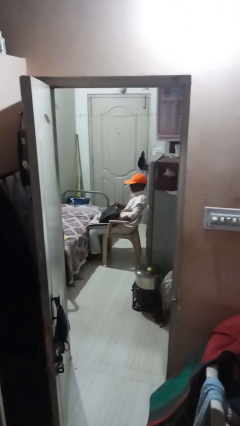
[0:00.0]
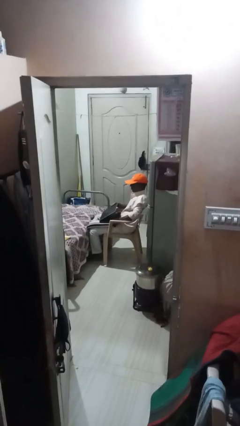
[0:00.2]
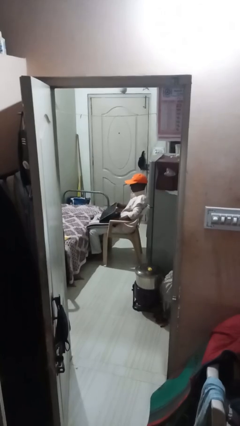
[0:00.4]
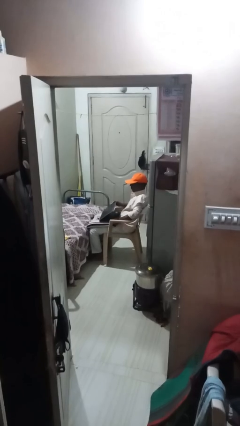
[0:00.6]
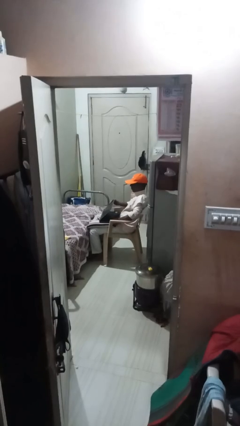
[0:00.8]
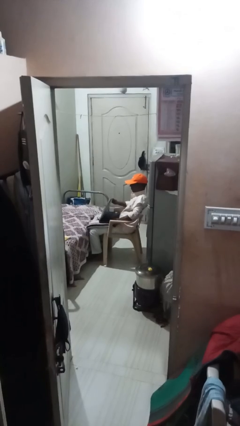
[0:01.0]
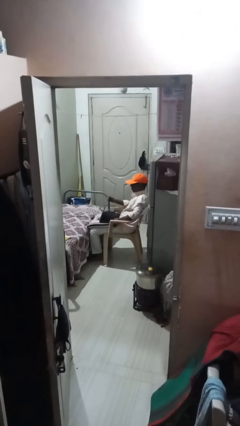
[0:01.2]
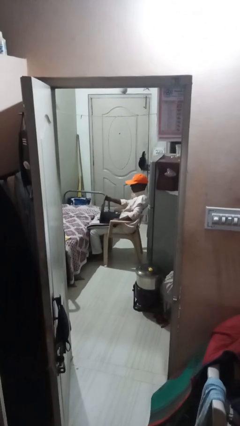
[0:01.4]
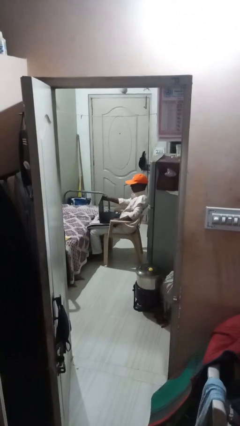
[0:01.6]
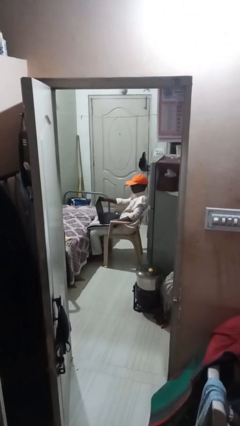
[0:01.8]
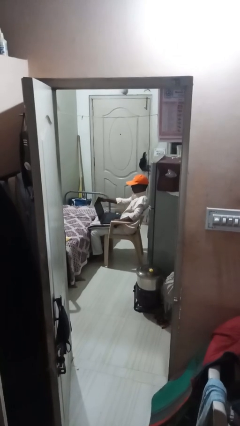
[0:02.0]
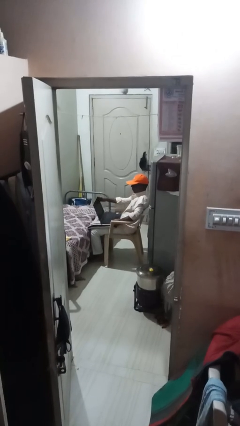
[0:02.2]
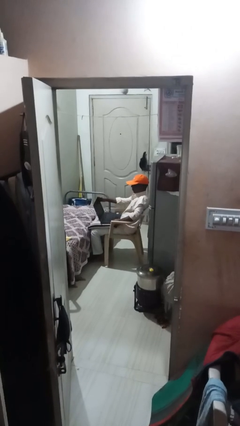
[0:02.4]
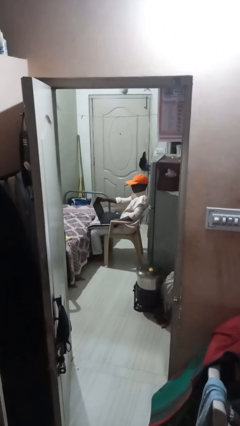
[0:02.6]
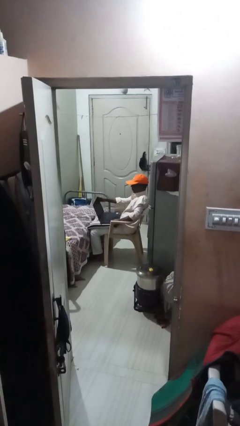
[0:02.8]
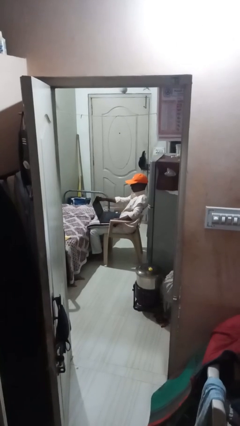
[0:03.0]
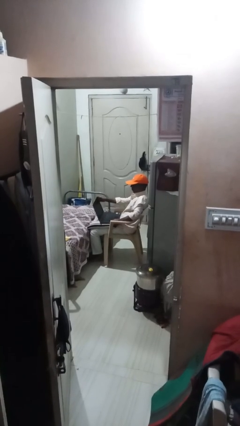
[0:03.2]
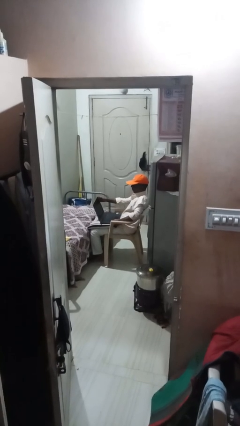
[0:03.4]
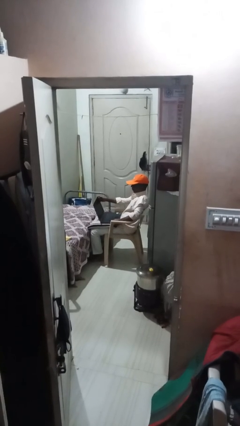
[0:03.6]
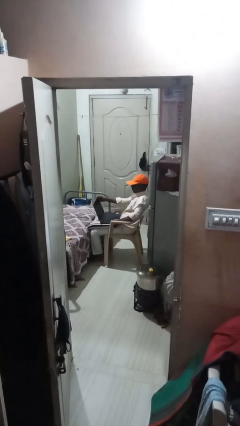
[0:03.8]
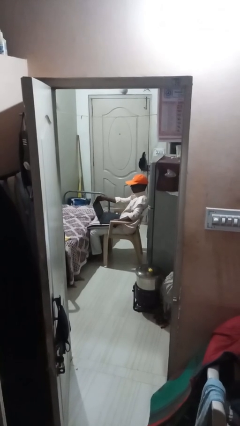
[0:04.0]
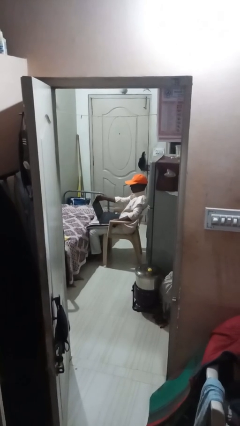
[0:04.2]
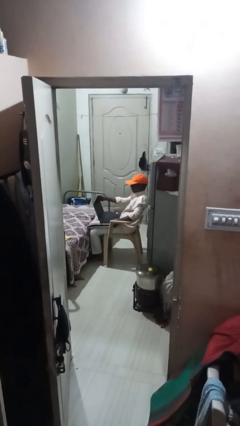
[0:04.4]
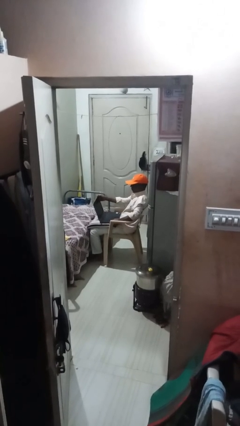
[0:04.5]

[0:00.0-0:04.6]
person interacts with laptop

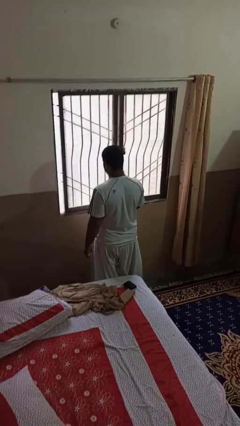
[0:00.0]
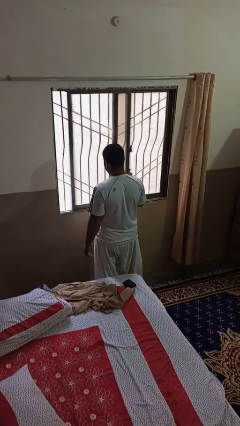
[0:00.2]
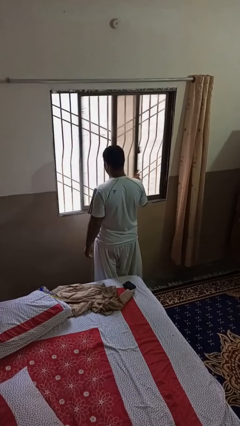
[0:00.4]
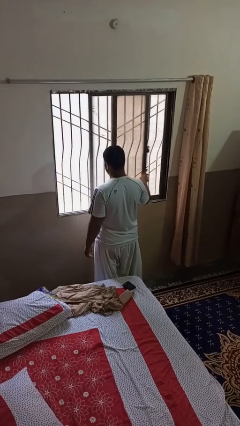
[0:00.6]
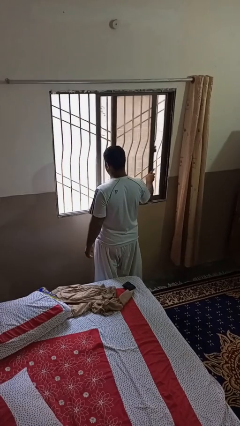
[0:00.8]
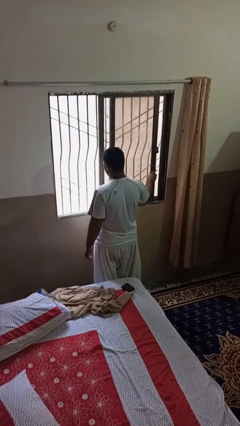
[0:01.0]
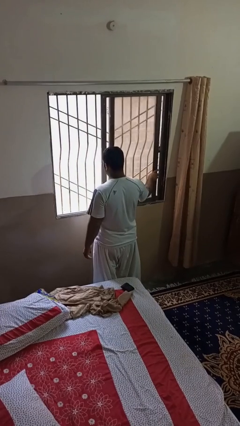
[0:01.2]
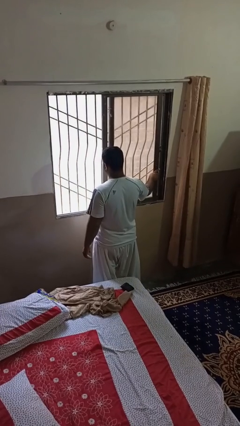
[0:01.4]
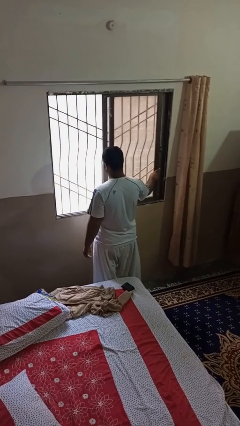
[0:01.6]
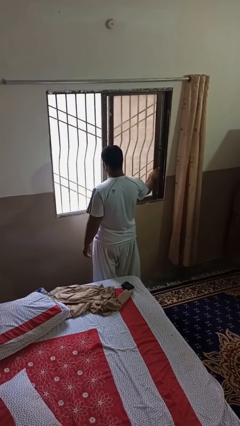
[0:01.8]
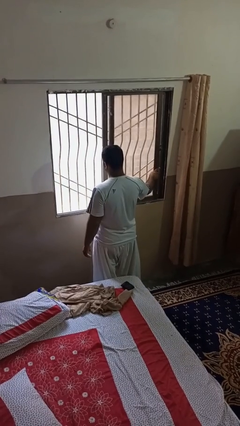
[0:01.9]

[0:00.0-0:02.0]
person opens home window

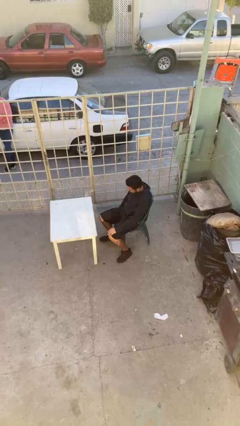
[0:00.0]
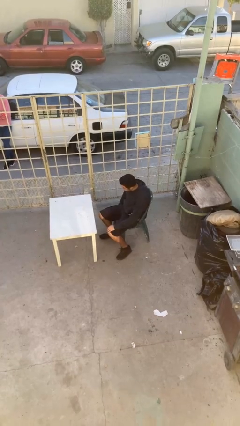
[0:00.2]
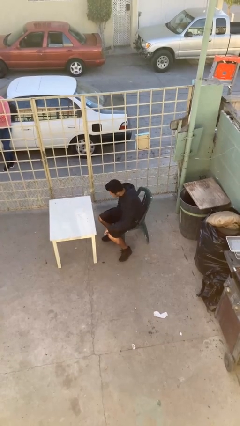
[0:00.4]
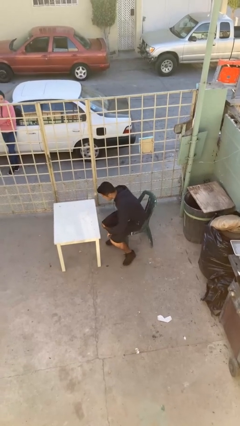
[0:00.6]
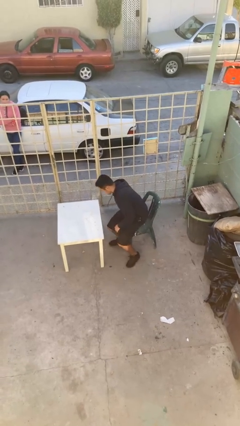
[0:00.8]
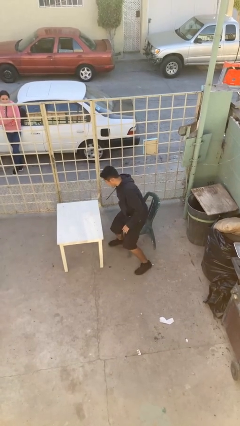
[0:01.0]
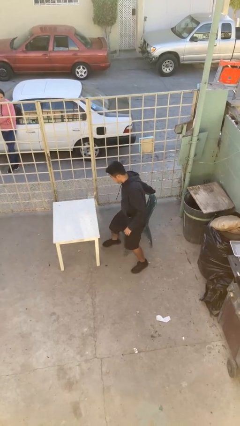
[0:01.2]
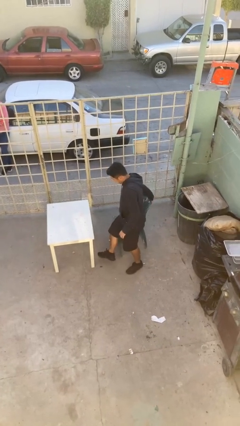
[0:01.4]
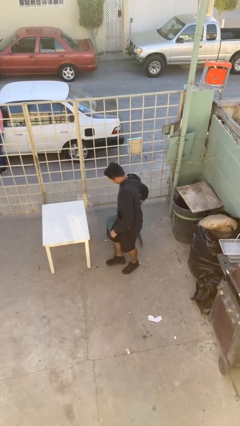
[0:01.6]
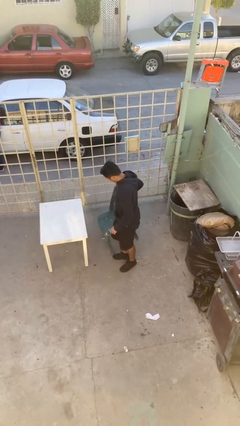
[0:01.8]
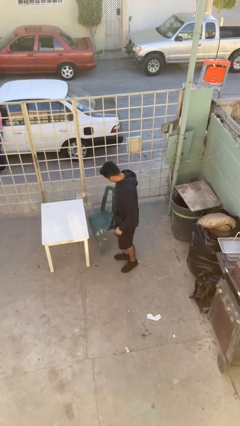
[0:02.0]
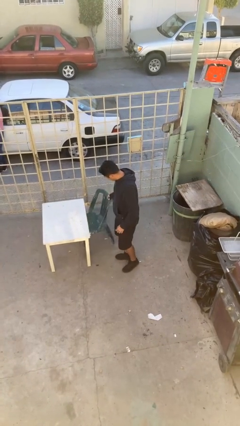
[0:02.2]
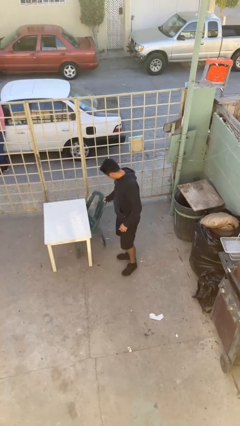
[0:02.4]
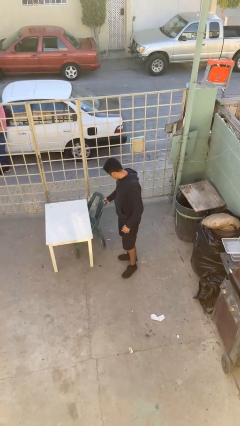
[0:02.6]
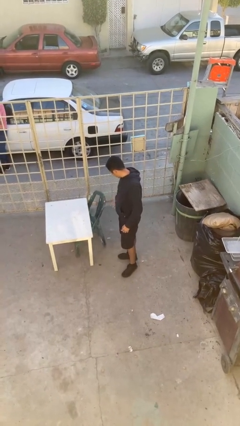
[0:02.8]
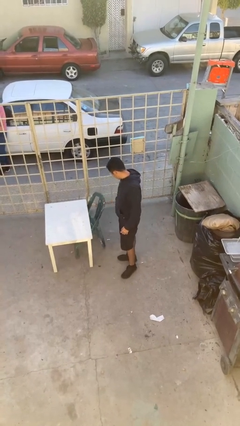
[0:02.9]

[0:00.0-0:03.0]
person stands up

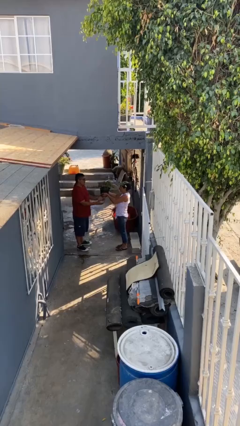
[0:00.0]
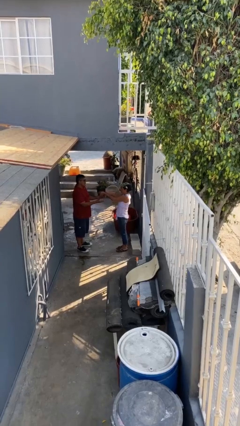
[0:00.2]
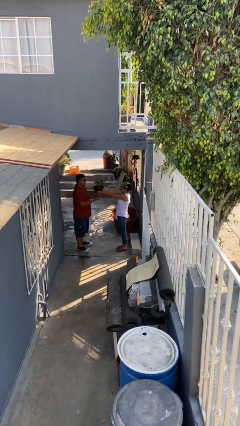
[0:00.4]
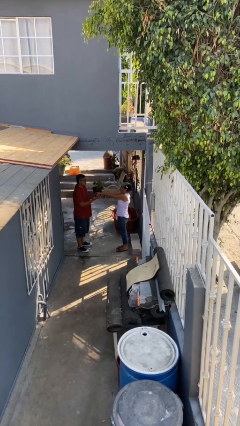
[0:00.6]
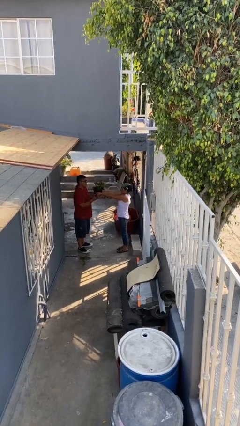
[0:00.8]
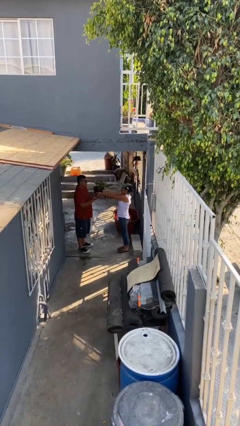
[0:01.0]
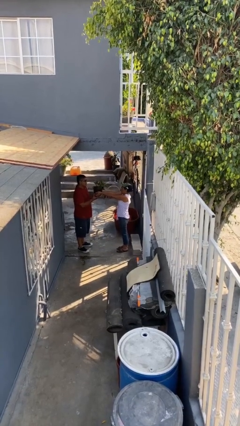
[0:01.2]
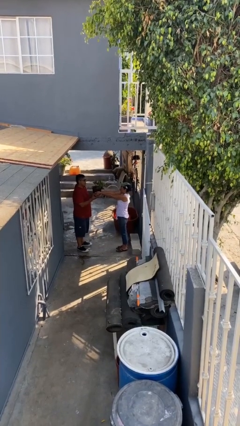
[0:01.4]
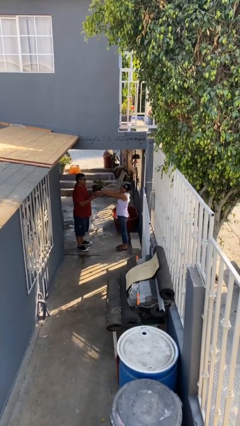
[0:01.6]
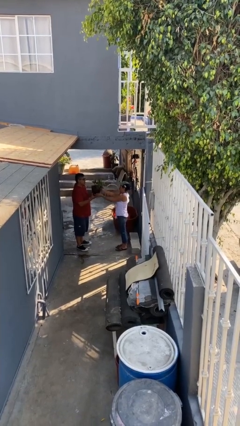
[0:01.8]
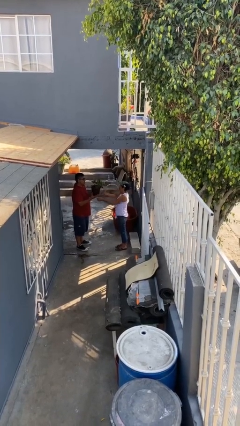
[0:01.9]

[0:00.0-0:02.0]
person transfers object to person

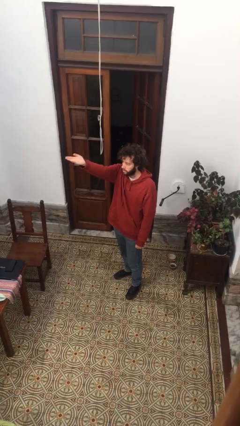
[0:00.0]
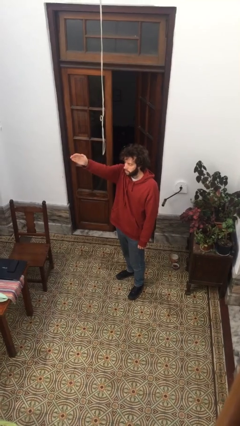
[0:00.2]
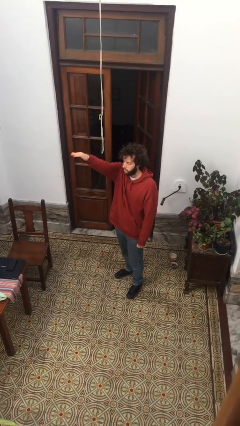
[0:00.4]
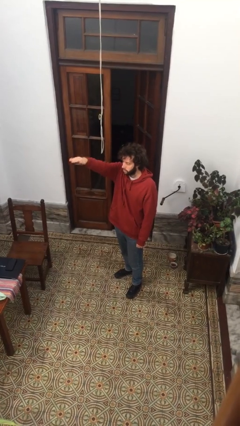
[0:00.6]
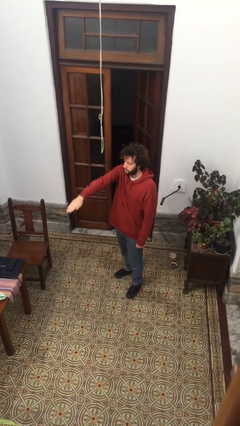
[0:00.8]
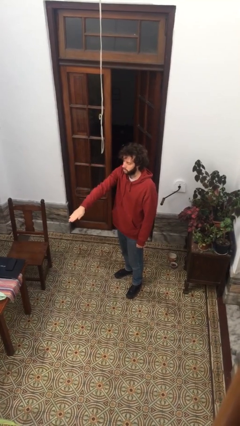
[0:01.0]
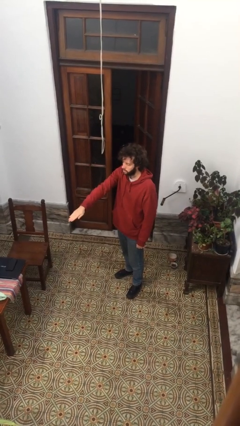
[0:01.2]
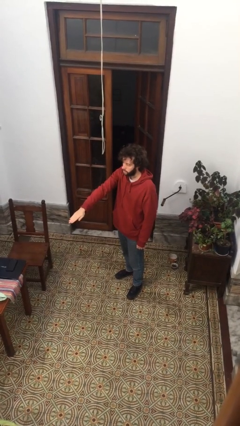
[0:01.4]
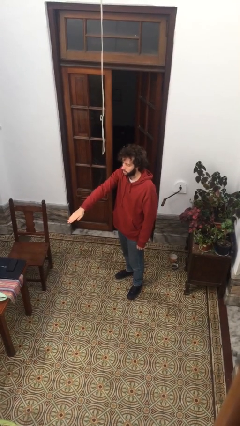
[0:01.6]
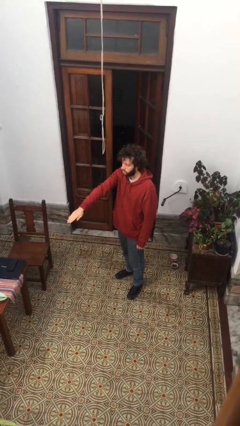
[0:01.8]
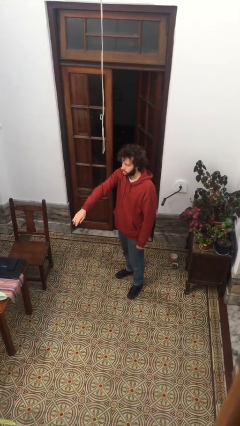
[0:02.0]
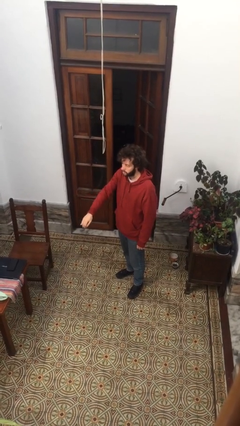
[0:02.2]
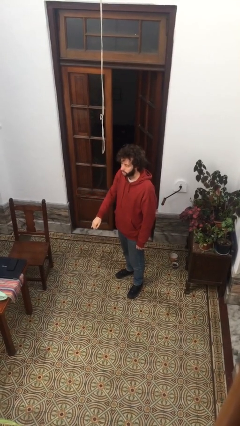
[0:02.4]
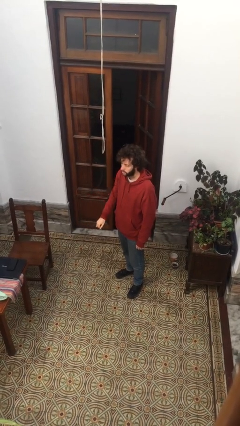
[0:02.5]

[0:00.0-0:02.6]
person gestures swipe down

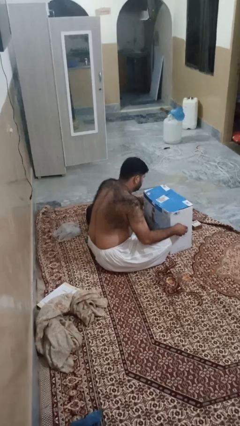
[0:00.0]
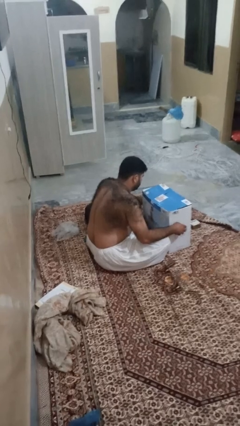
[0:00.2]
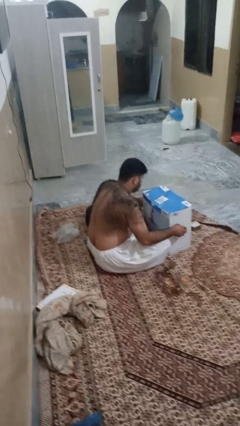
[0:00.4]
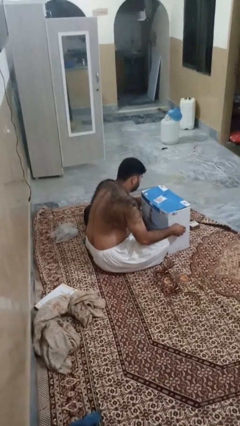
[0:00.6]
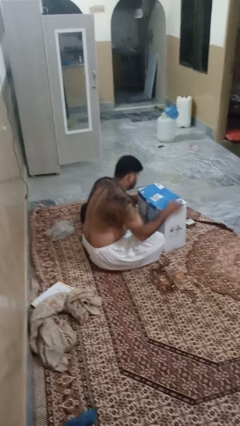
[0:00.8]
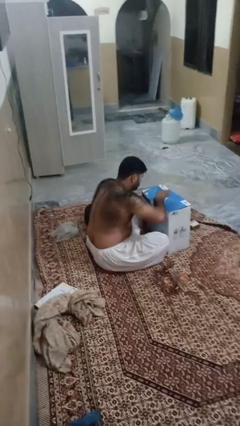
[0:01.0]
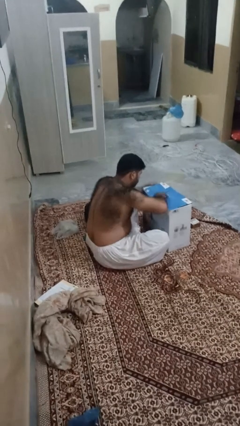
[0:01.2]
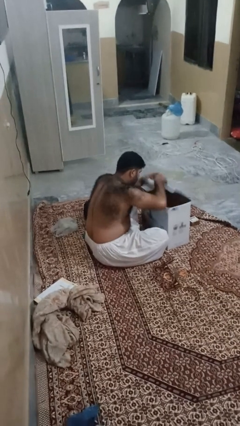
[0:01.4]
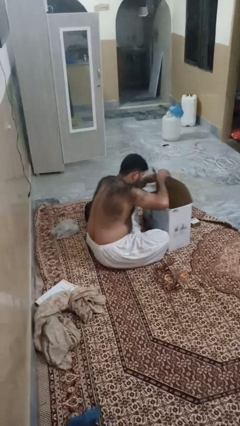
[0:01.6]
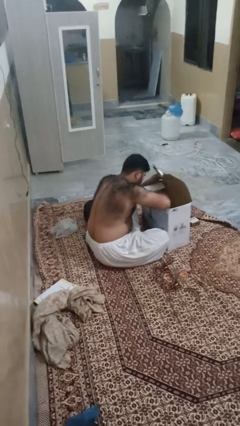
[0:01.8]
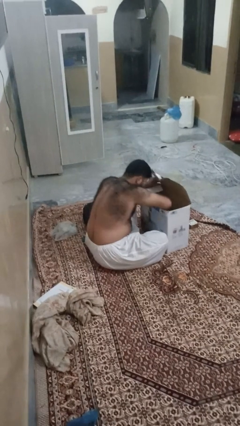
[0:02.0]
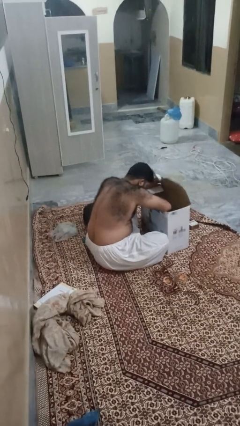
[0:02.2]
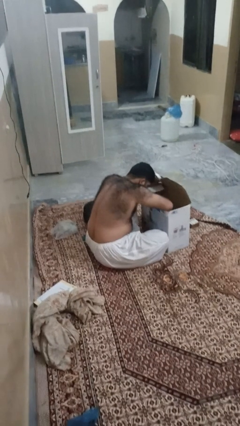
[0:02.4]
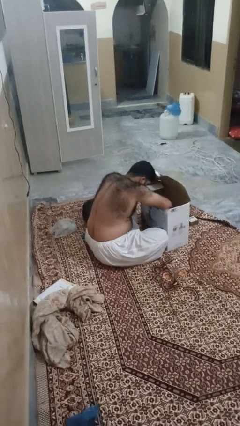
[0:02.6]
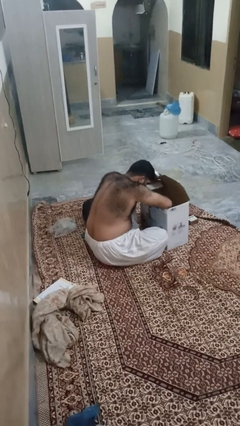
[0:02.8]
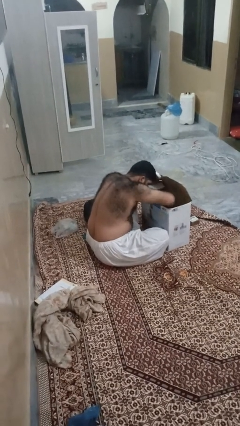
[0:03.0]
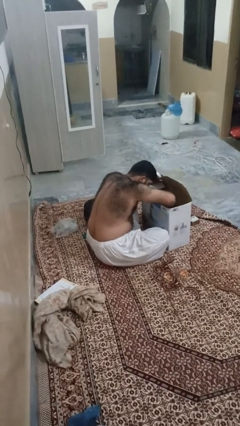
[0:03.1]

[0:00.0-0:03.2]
person searches in box
